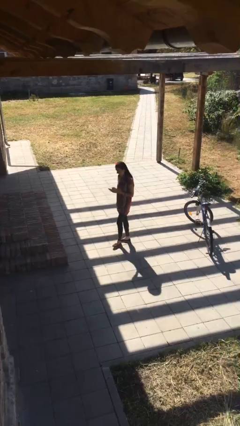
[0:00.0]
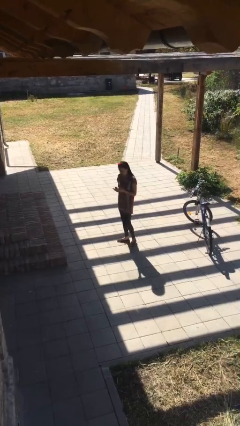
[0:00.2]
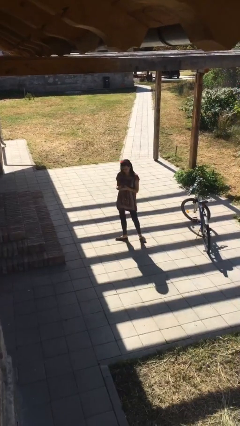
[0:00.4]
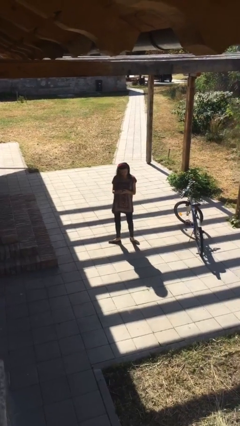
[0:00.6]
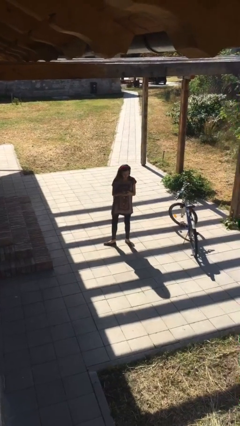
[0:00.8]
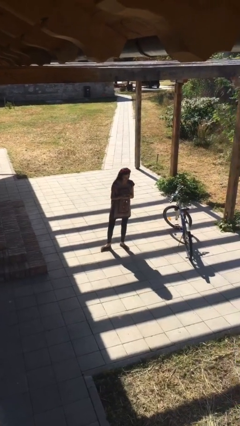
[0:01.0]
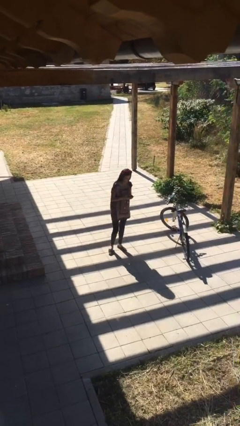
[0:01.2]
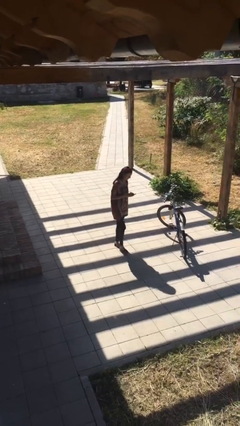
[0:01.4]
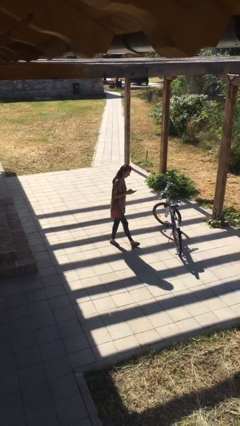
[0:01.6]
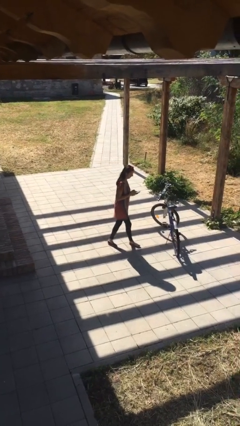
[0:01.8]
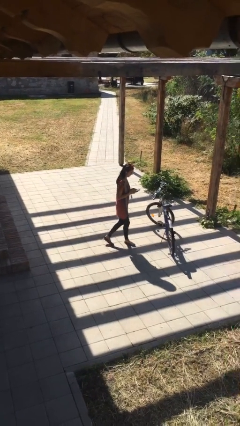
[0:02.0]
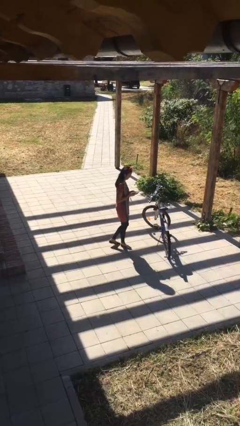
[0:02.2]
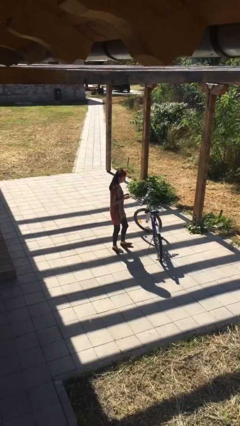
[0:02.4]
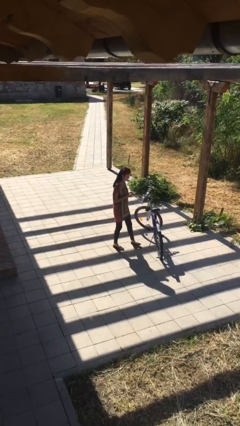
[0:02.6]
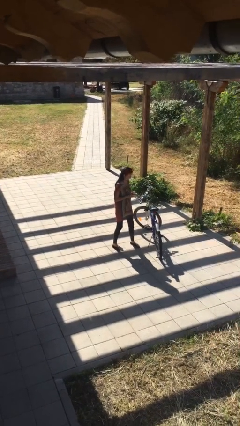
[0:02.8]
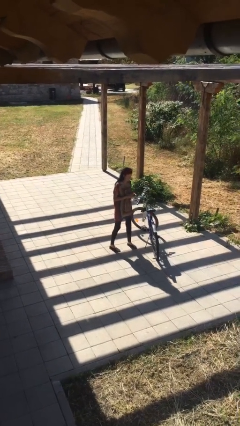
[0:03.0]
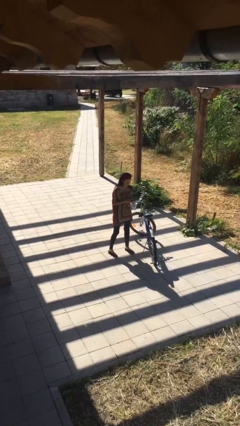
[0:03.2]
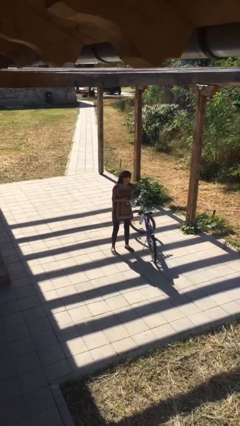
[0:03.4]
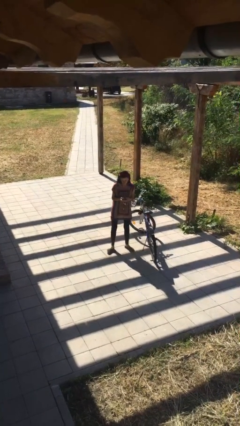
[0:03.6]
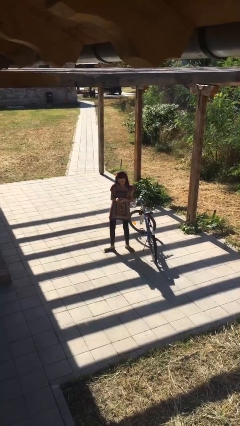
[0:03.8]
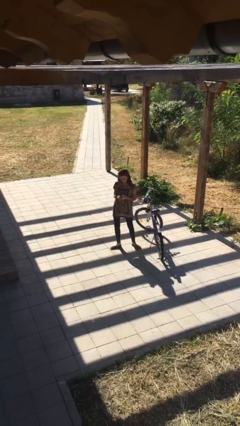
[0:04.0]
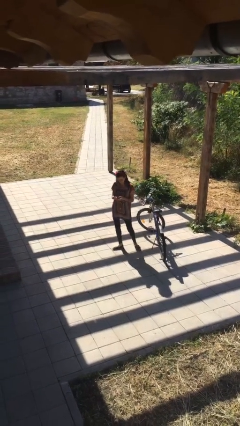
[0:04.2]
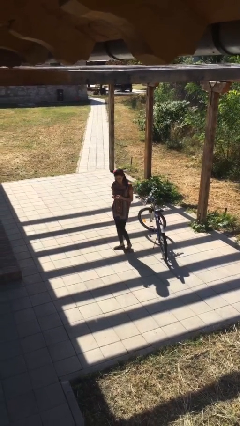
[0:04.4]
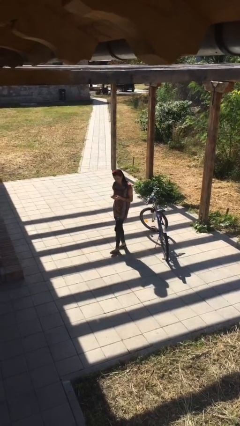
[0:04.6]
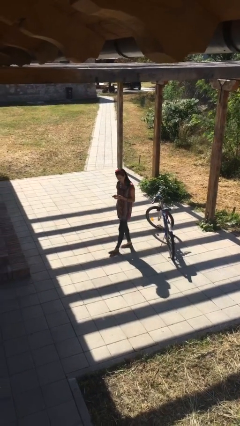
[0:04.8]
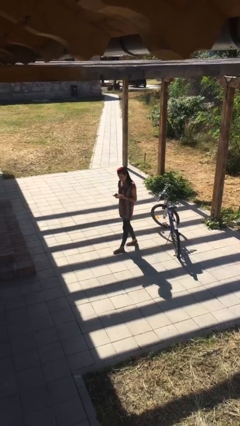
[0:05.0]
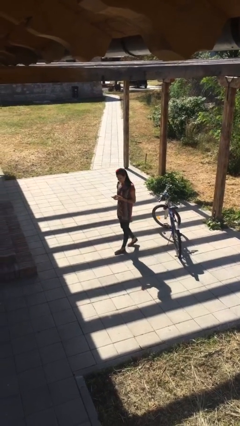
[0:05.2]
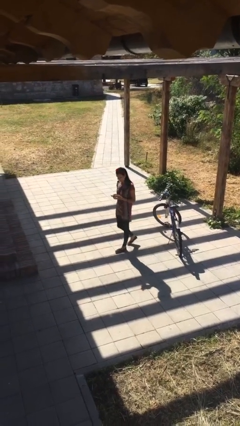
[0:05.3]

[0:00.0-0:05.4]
person texts on phone

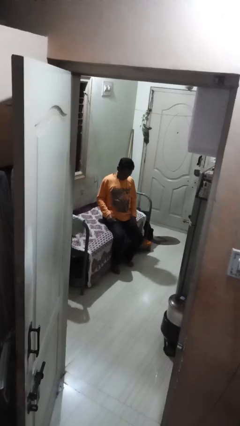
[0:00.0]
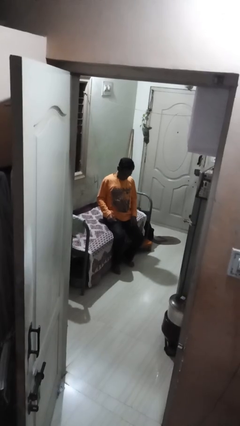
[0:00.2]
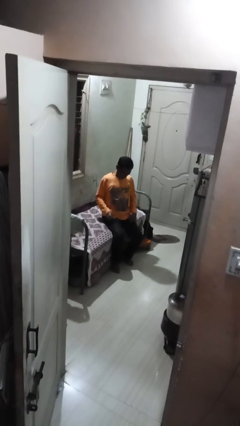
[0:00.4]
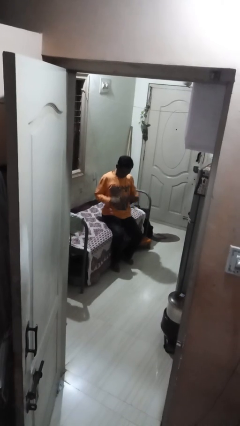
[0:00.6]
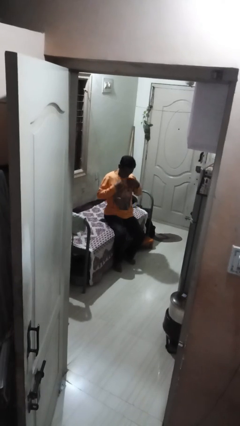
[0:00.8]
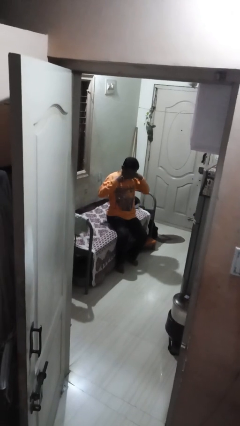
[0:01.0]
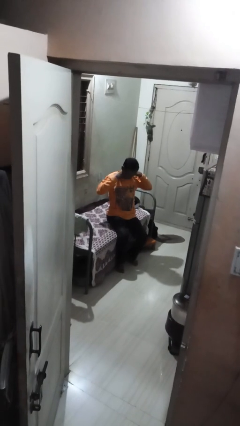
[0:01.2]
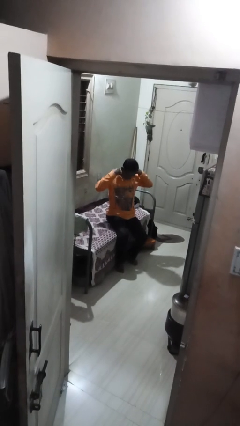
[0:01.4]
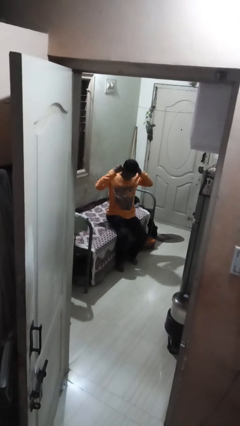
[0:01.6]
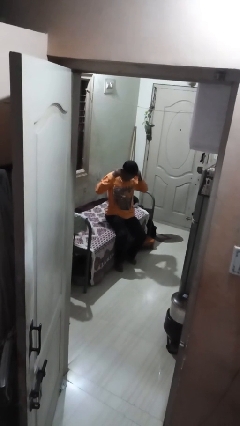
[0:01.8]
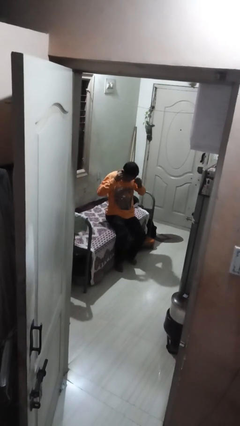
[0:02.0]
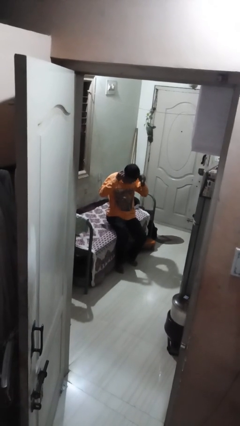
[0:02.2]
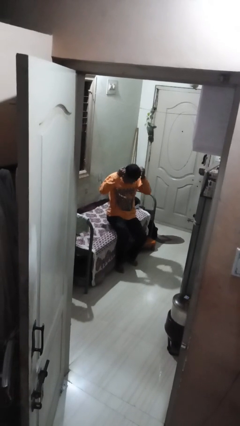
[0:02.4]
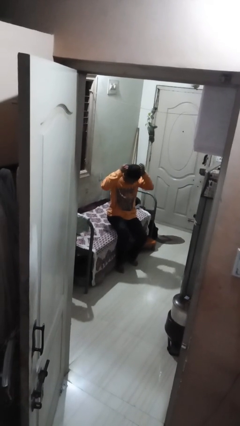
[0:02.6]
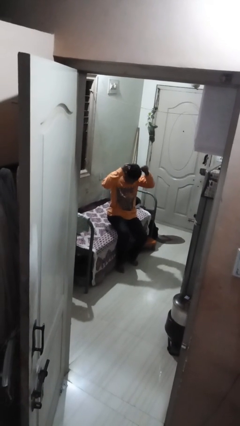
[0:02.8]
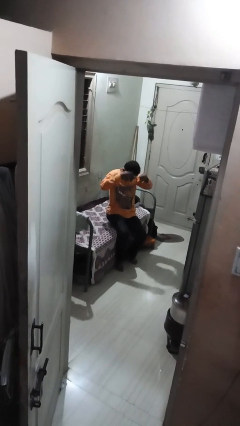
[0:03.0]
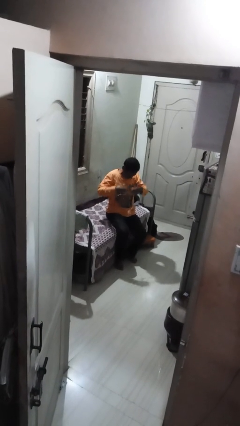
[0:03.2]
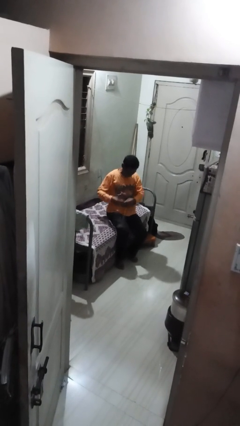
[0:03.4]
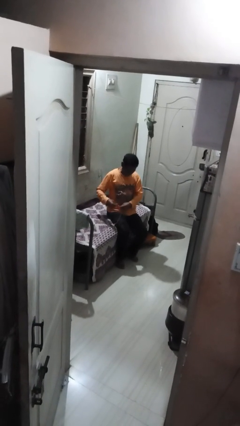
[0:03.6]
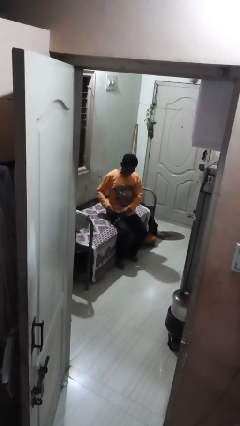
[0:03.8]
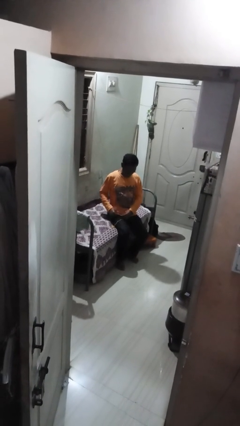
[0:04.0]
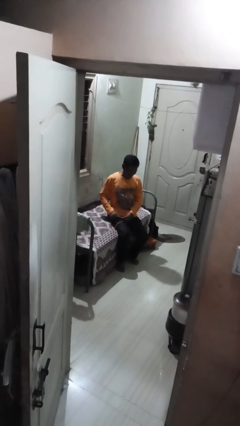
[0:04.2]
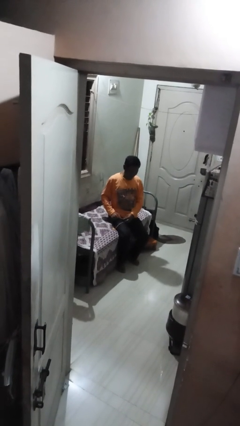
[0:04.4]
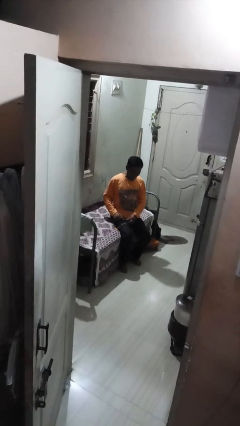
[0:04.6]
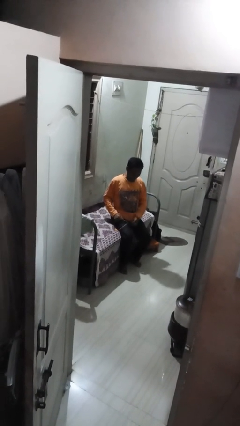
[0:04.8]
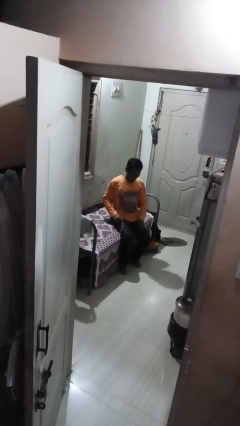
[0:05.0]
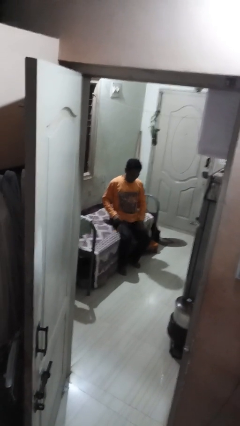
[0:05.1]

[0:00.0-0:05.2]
person takes off necklace

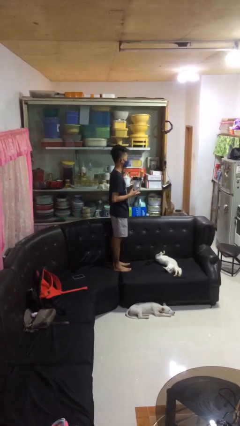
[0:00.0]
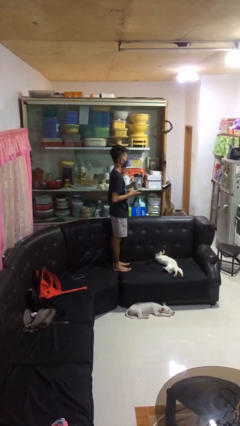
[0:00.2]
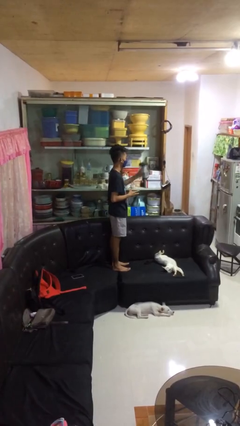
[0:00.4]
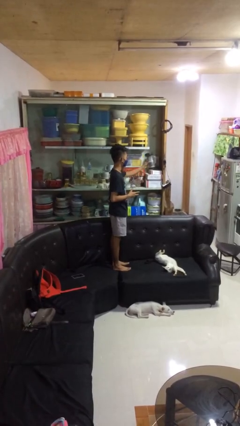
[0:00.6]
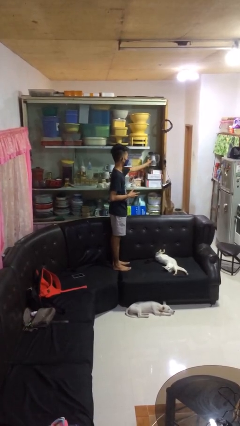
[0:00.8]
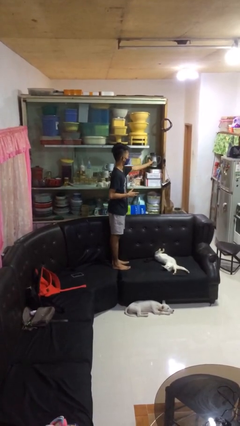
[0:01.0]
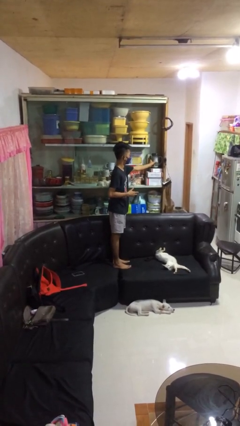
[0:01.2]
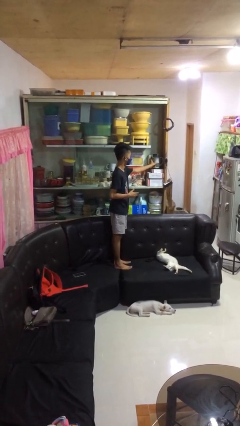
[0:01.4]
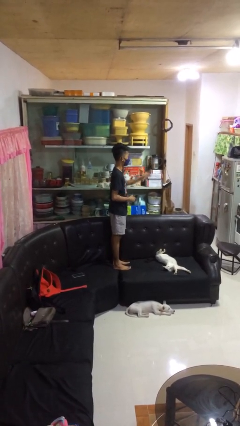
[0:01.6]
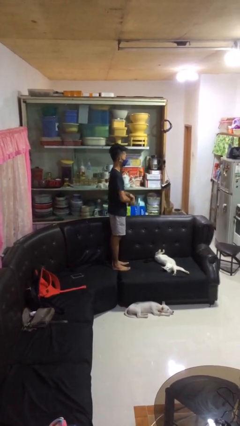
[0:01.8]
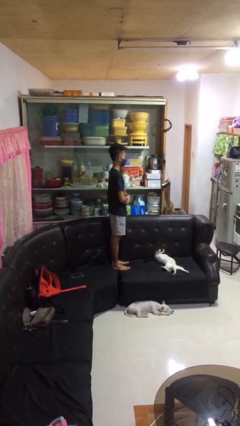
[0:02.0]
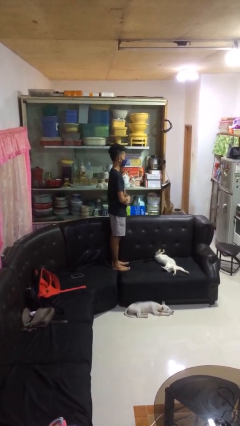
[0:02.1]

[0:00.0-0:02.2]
person puts down object into cabinet

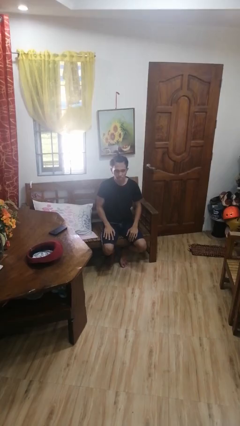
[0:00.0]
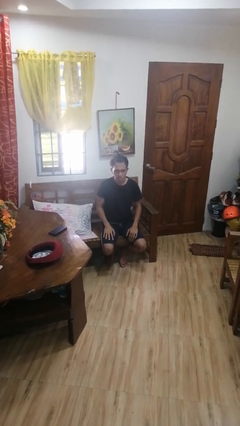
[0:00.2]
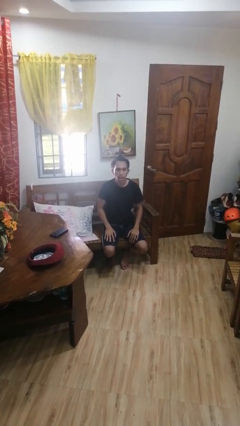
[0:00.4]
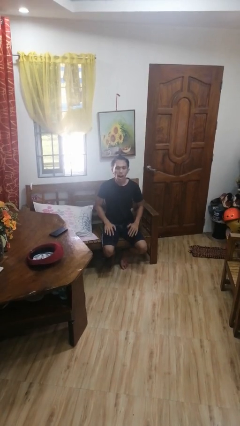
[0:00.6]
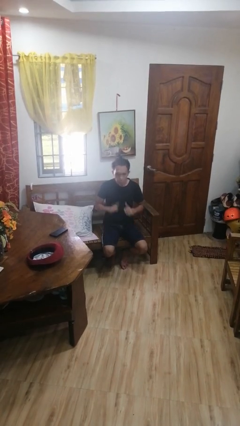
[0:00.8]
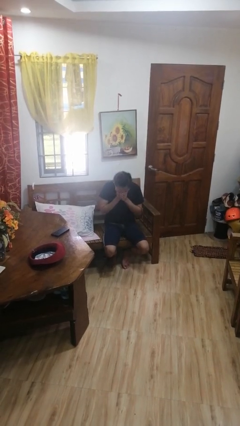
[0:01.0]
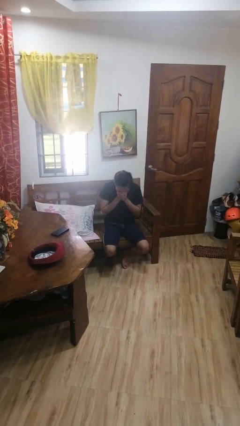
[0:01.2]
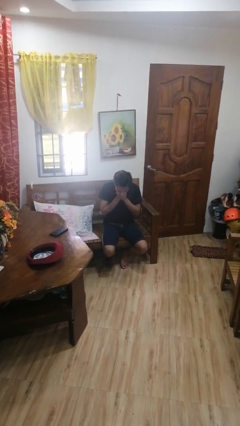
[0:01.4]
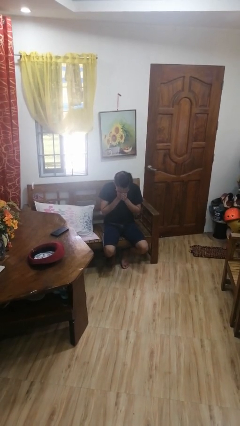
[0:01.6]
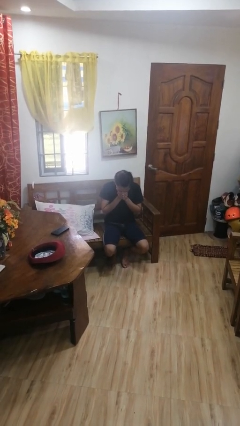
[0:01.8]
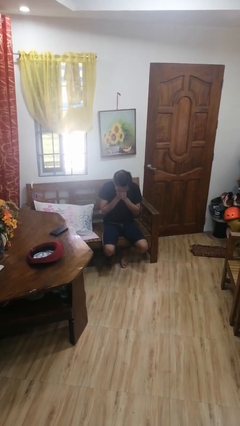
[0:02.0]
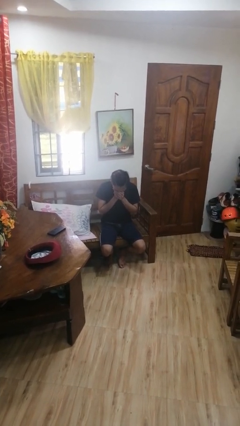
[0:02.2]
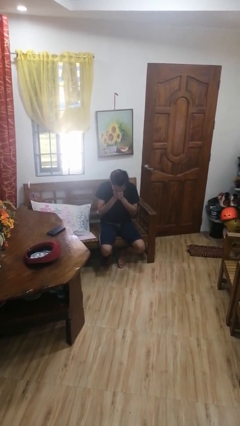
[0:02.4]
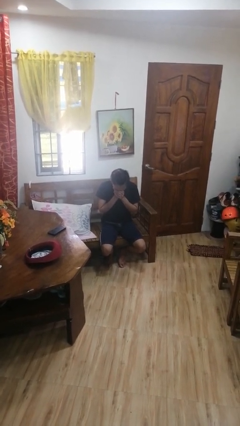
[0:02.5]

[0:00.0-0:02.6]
person sneezes into hand

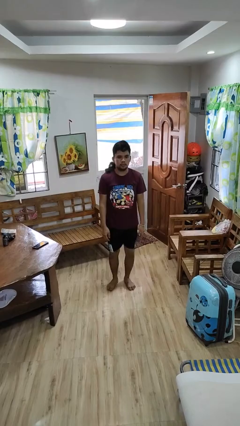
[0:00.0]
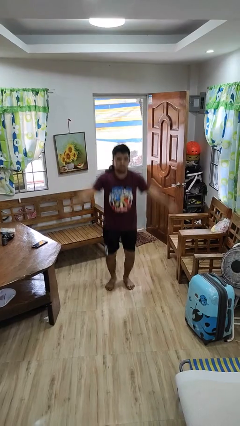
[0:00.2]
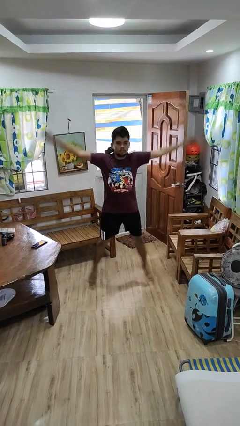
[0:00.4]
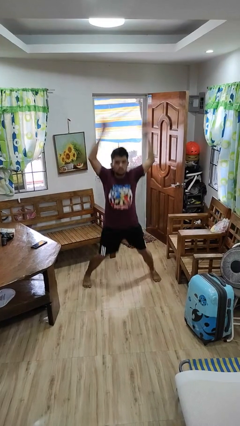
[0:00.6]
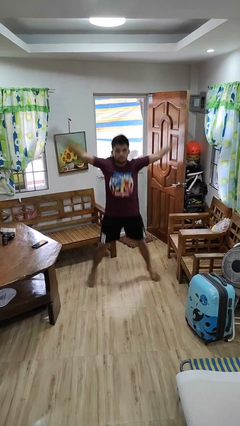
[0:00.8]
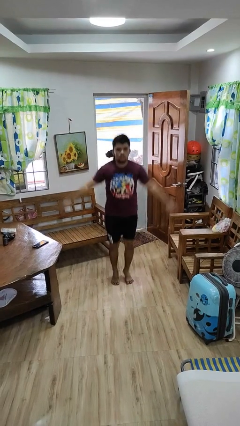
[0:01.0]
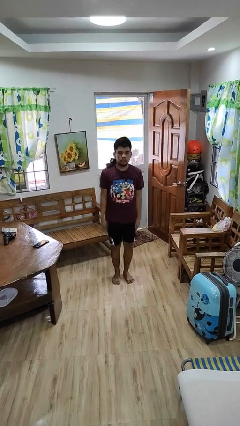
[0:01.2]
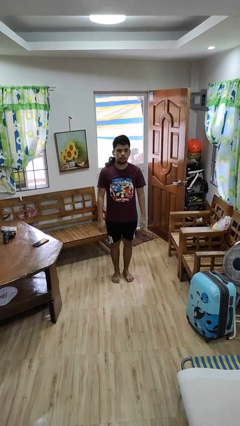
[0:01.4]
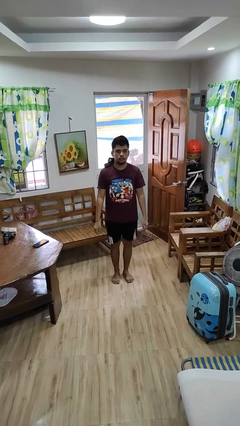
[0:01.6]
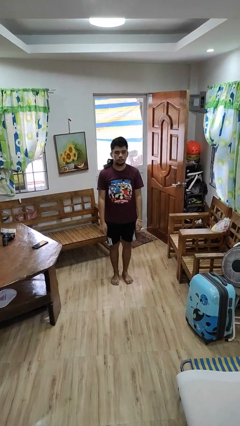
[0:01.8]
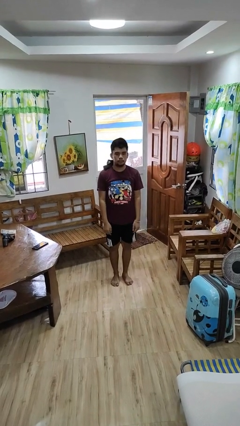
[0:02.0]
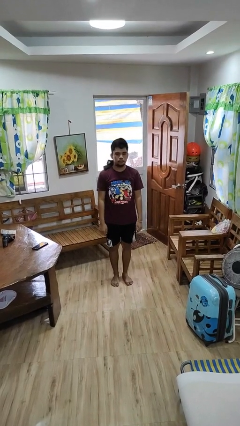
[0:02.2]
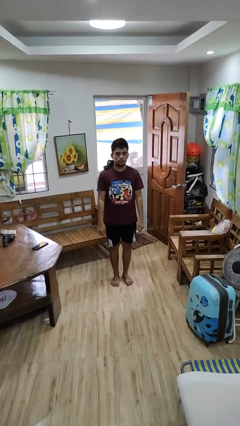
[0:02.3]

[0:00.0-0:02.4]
person exercises with jumping jacks
